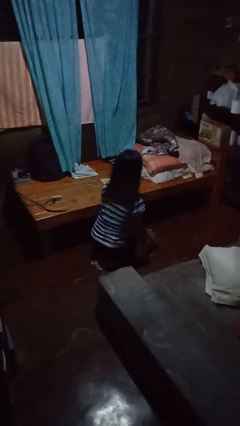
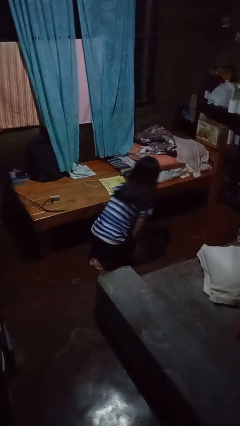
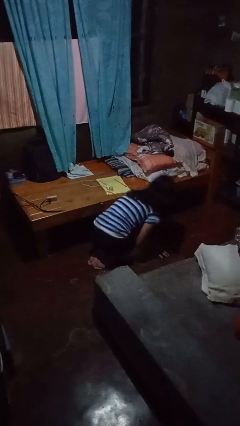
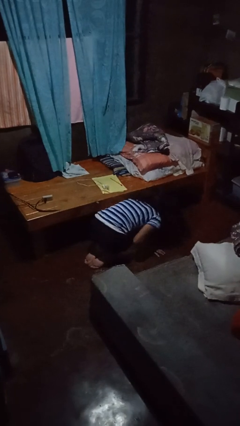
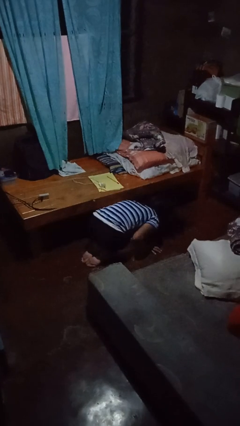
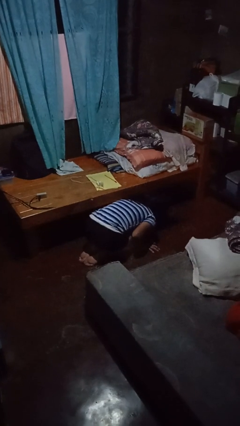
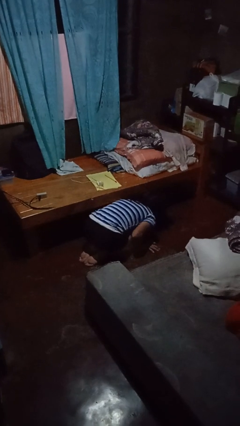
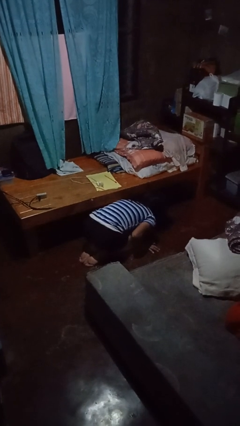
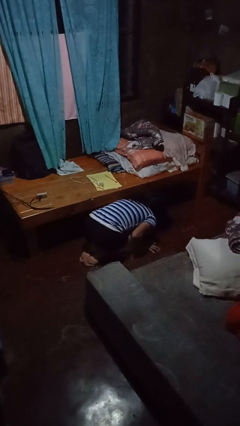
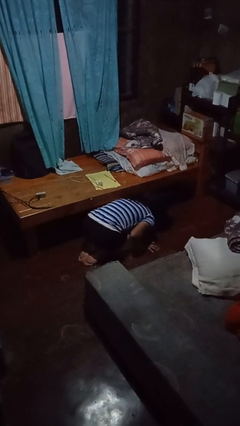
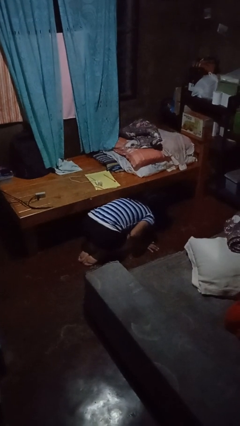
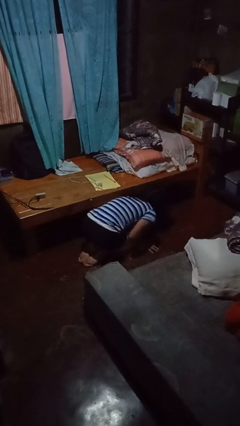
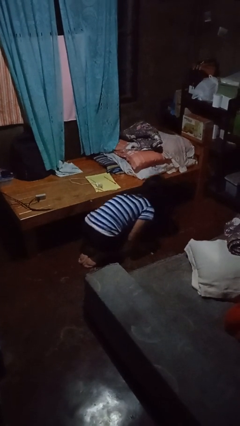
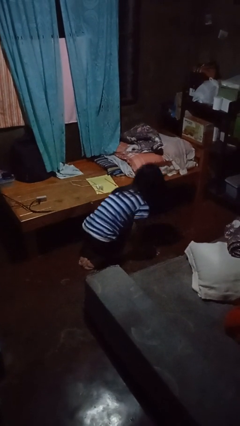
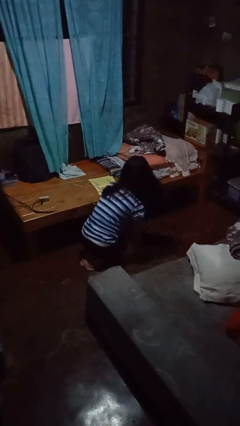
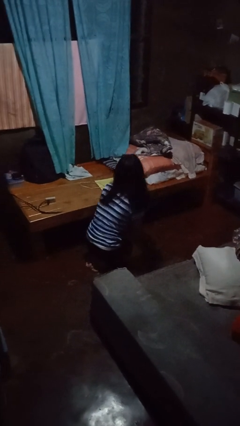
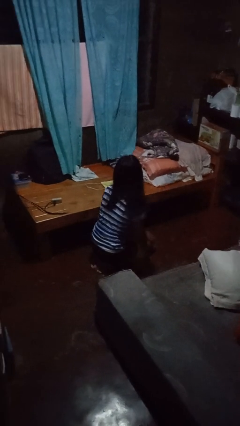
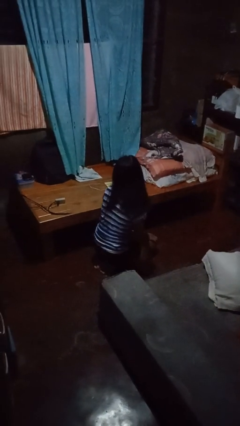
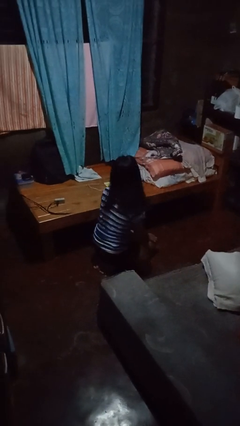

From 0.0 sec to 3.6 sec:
person searches under bed

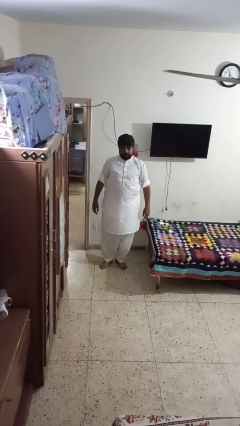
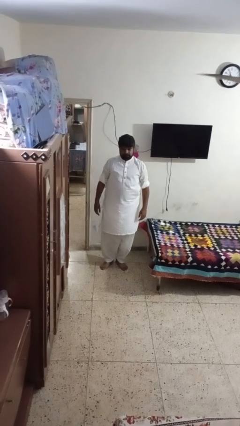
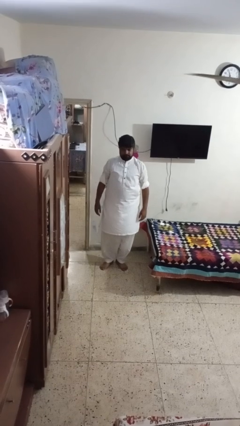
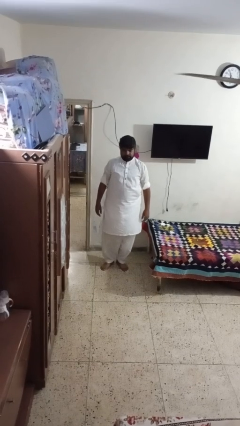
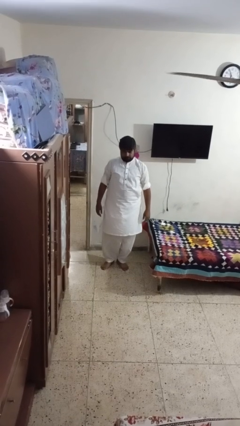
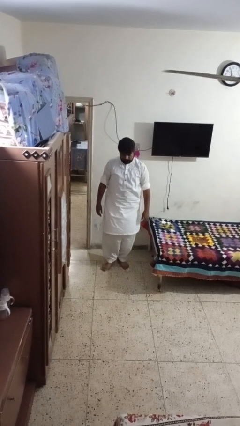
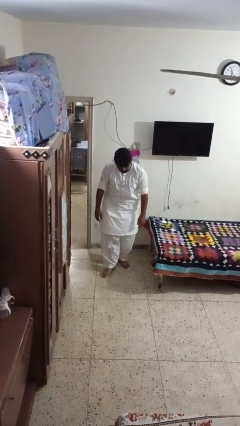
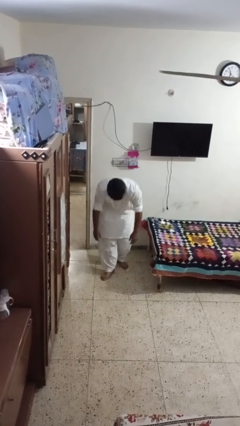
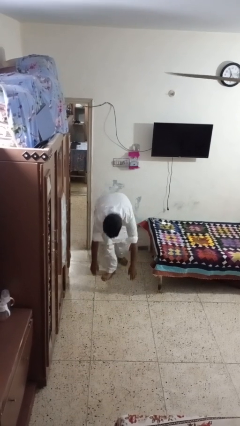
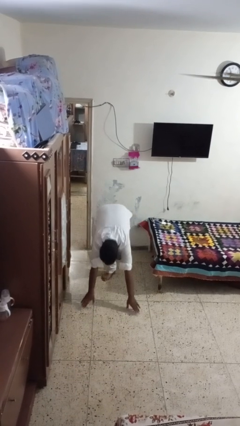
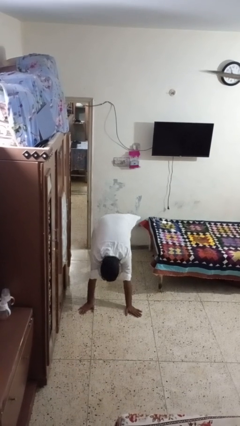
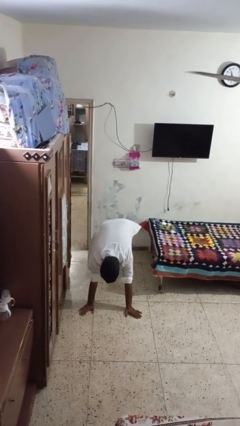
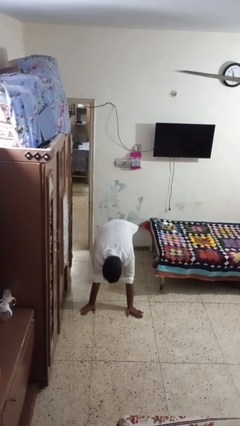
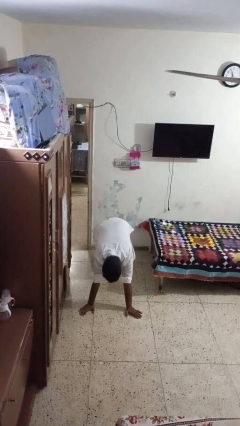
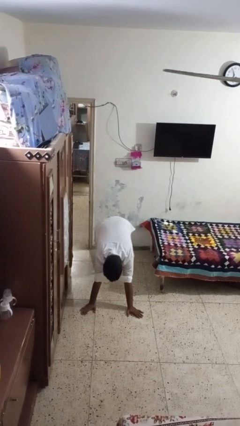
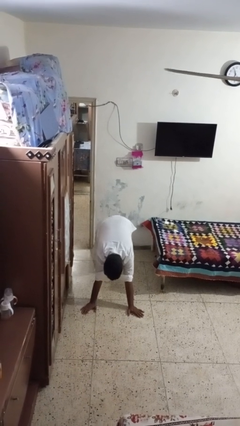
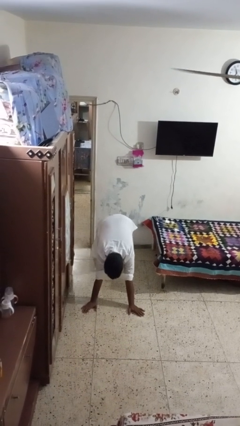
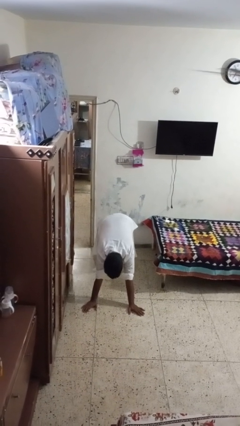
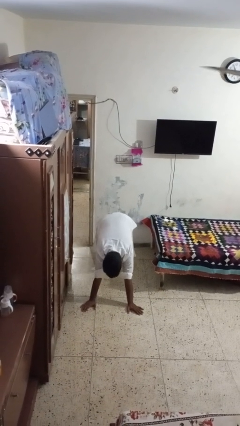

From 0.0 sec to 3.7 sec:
person exercises with plank

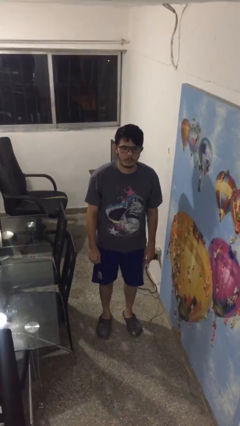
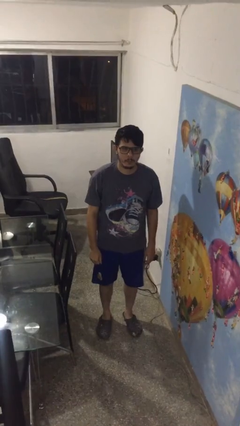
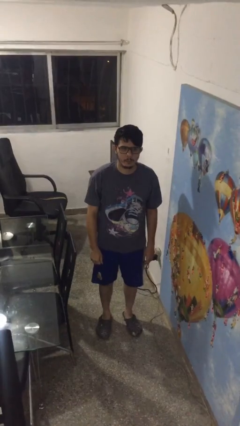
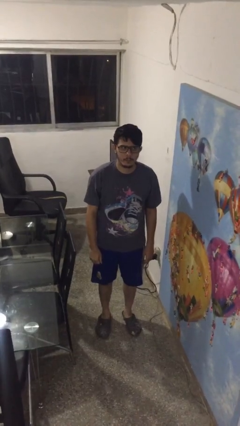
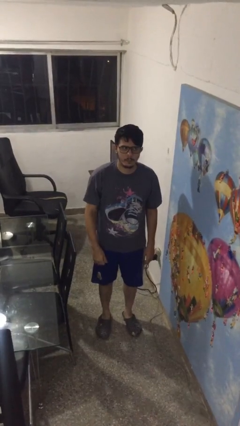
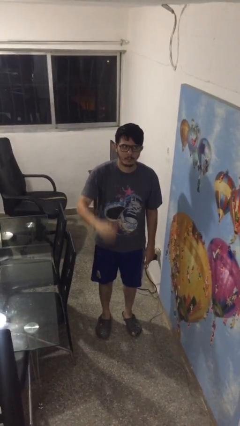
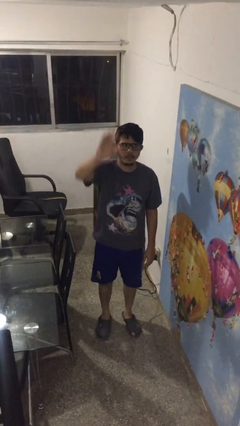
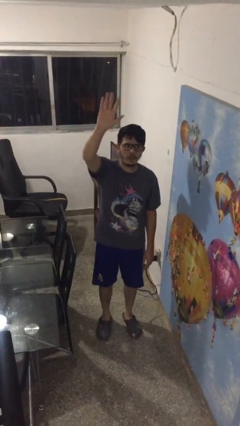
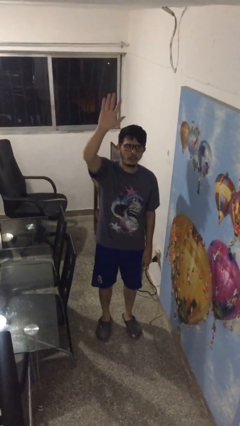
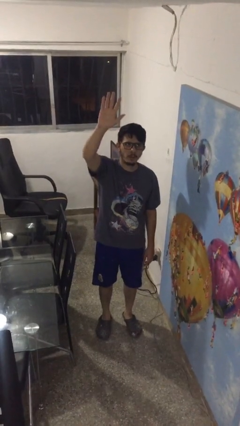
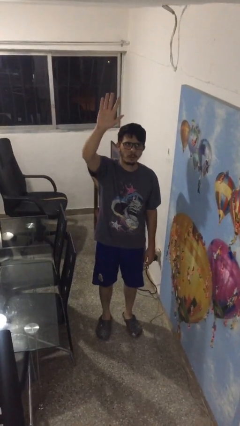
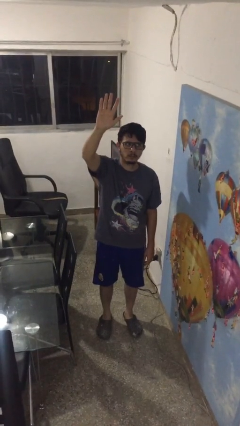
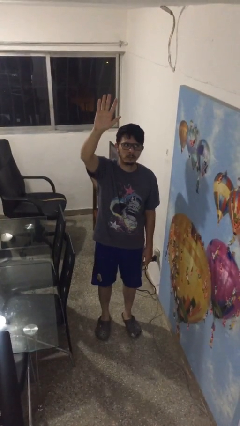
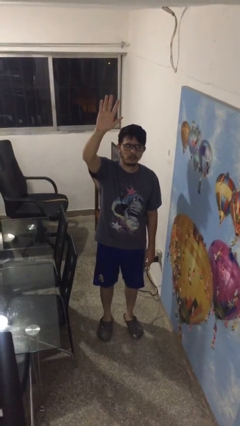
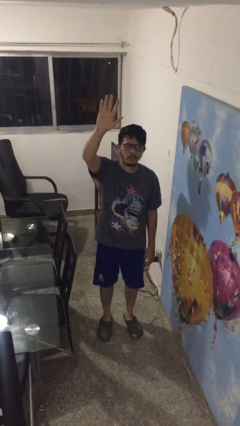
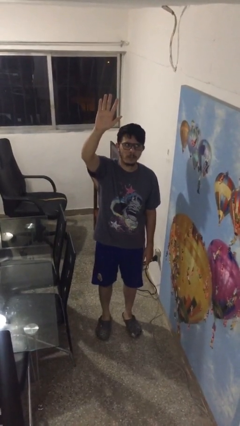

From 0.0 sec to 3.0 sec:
person gestures raise hand

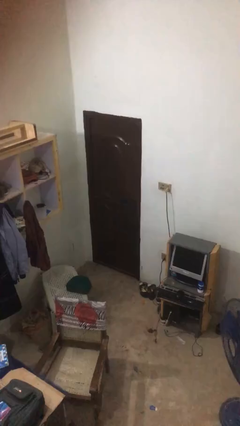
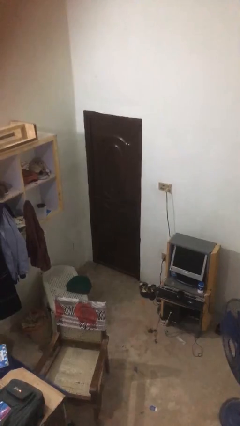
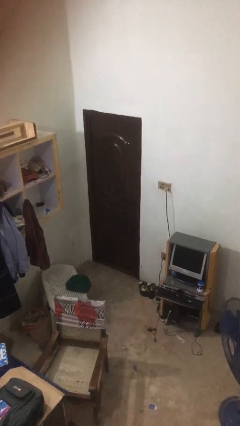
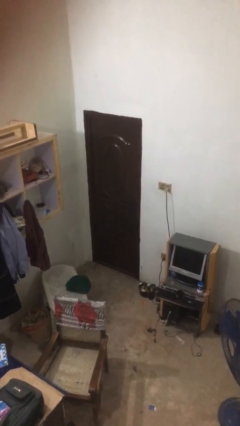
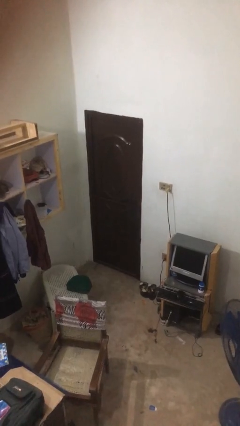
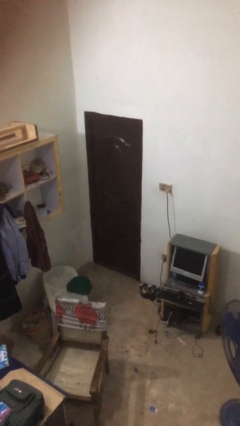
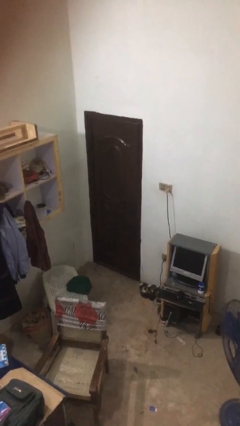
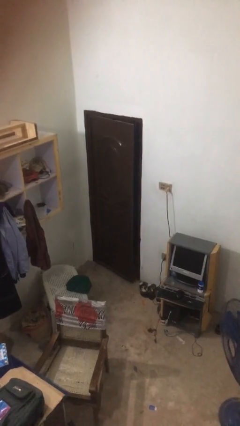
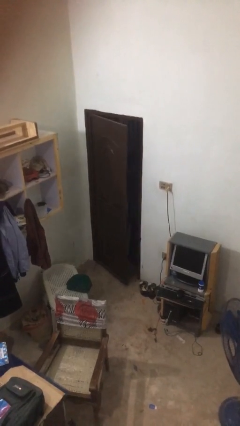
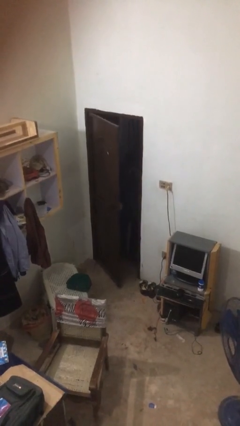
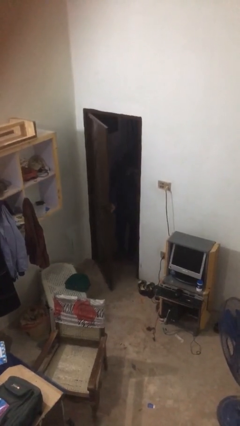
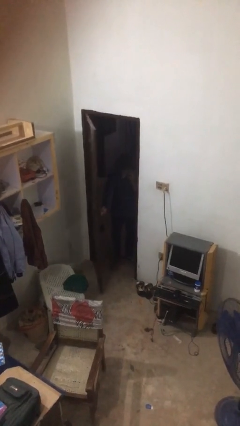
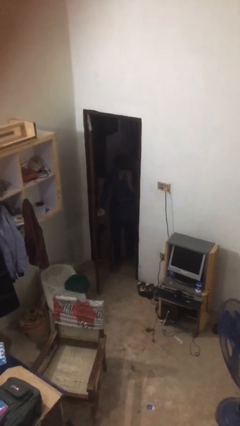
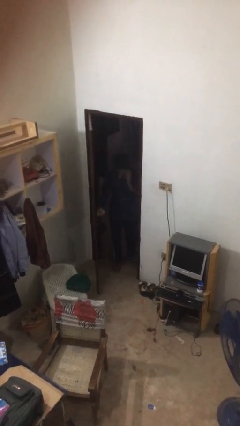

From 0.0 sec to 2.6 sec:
person opens facility door

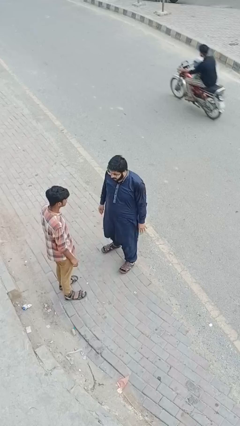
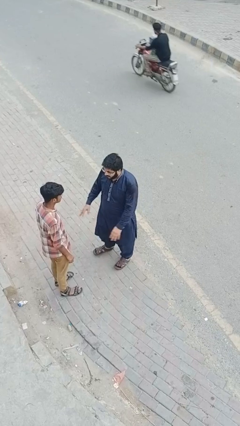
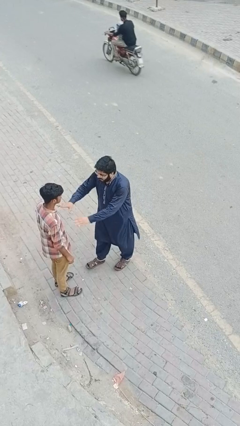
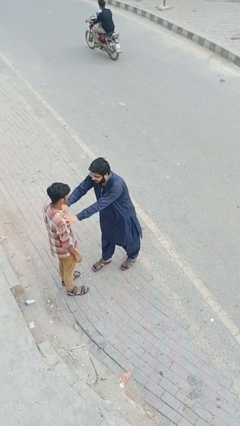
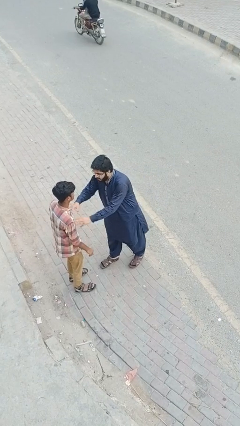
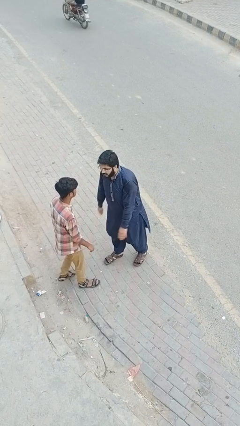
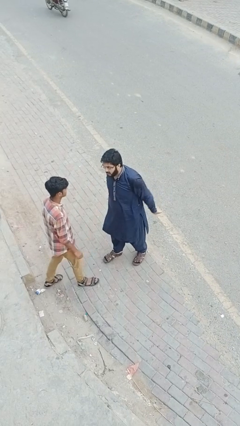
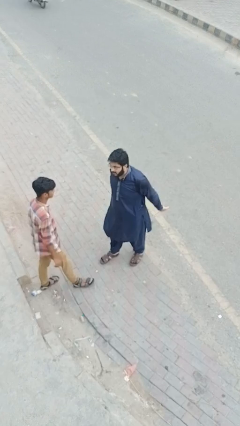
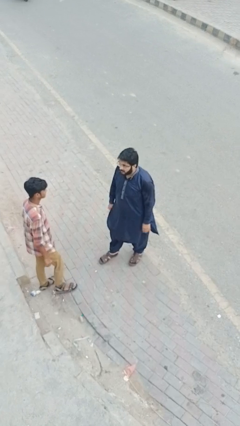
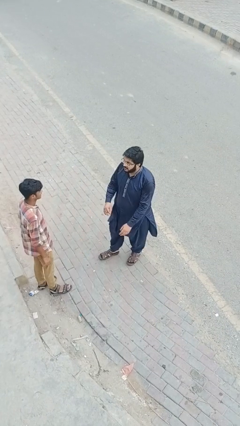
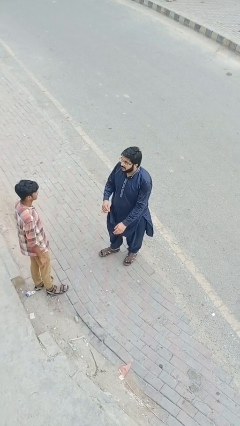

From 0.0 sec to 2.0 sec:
person shoves person

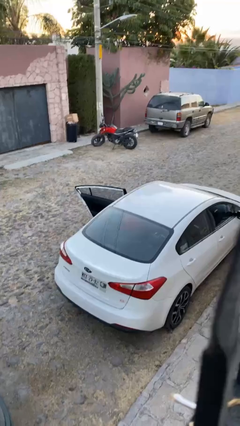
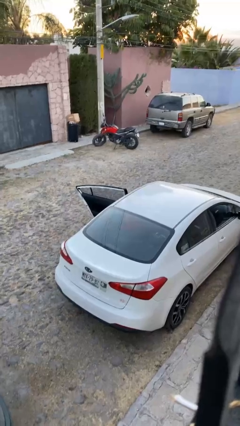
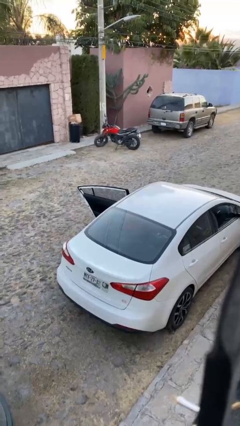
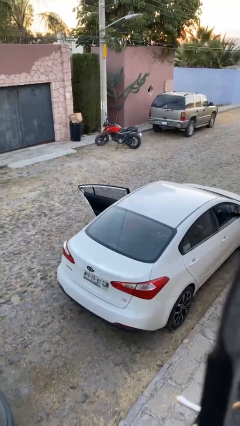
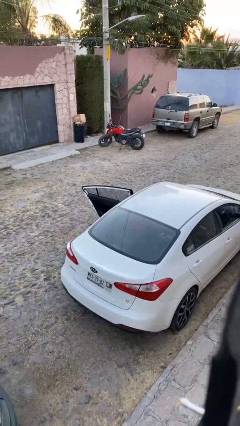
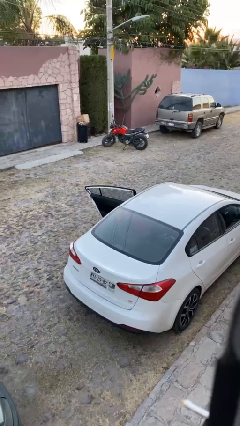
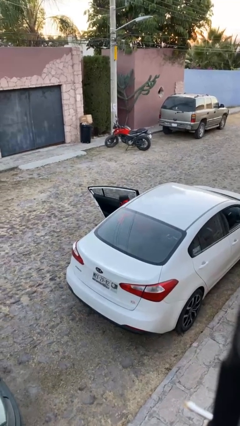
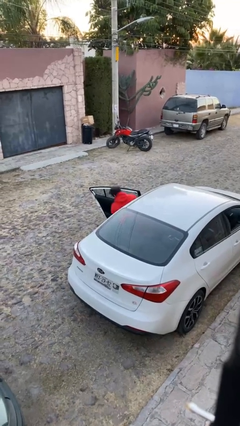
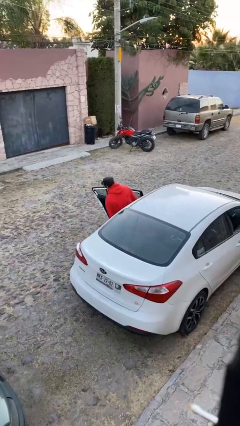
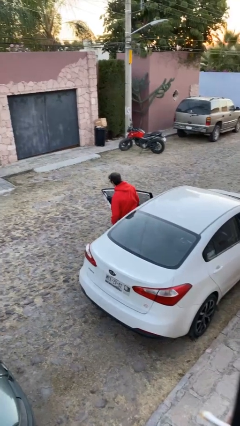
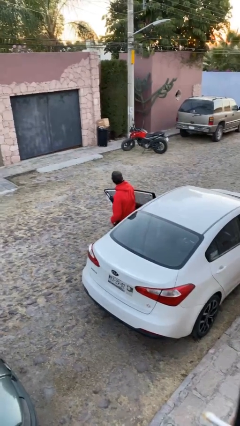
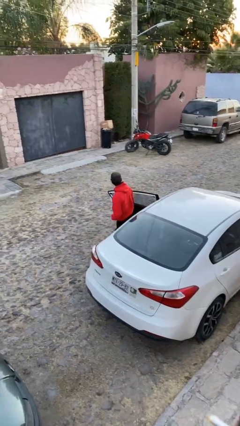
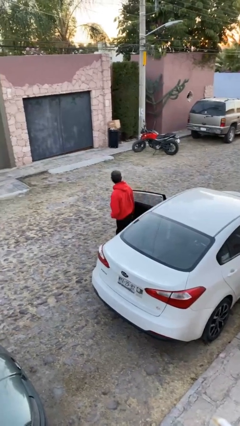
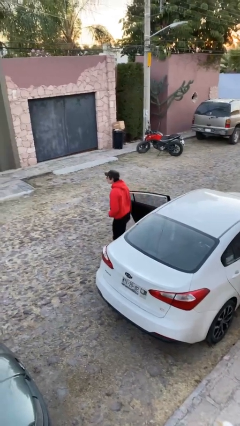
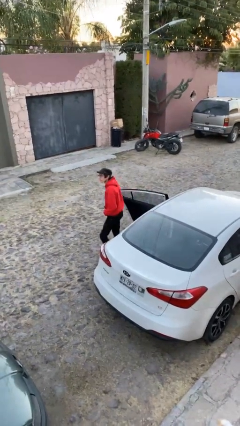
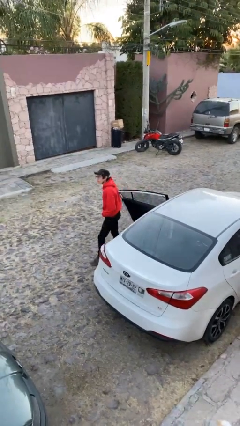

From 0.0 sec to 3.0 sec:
person exits car
